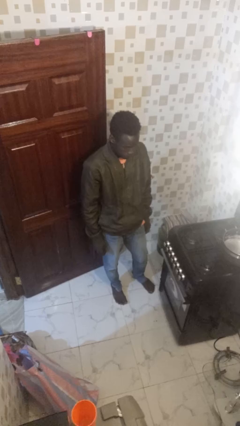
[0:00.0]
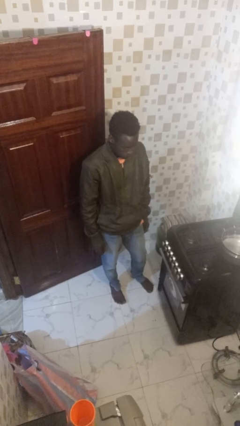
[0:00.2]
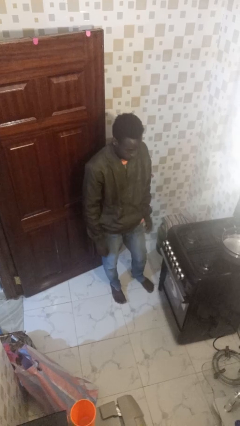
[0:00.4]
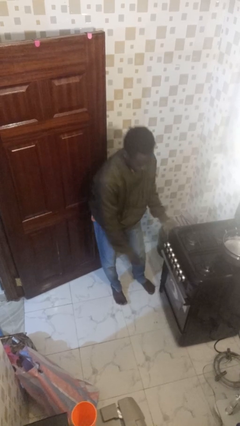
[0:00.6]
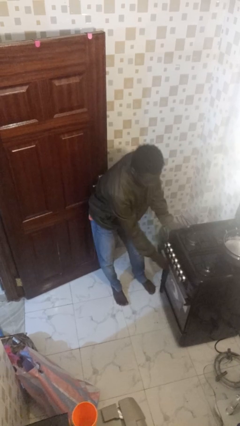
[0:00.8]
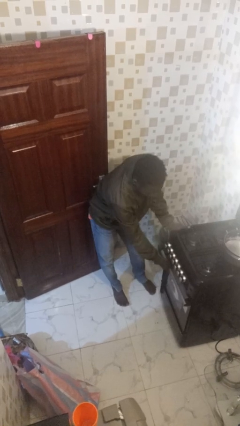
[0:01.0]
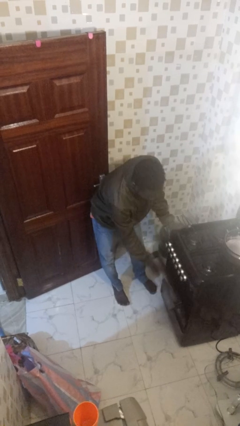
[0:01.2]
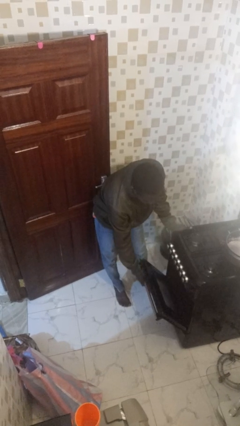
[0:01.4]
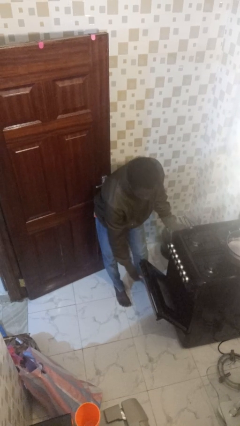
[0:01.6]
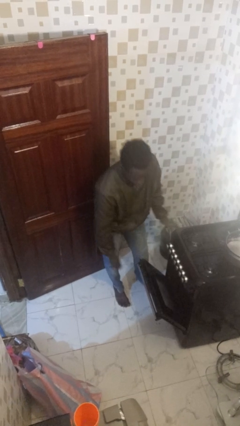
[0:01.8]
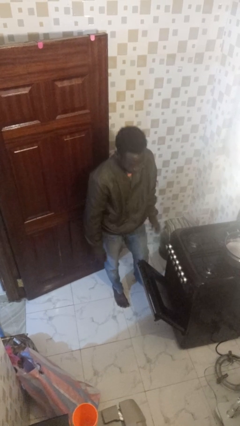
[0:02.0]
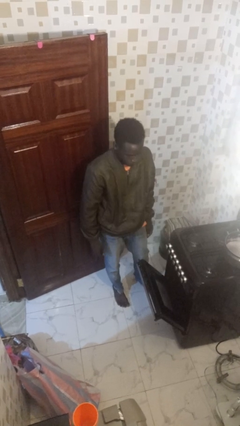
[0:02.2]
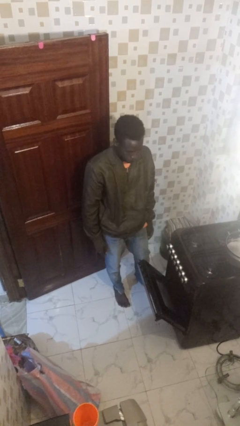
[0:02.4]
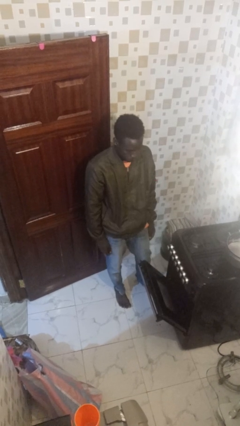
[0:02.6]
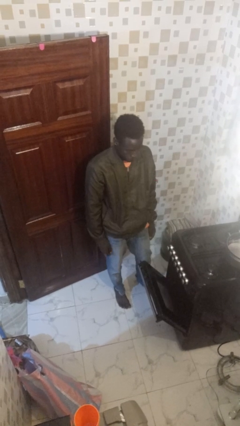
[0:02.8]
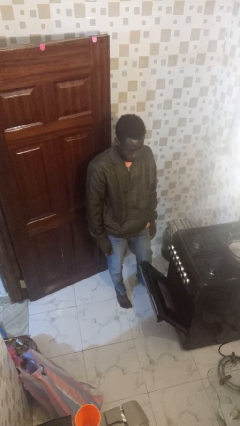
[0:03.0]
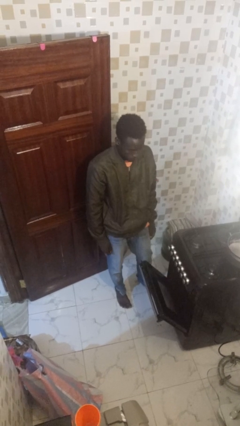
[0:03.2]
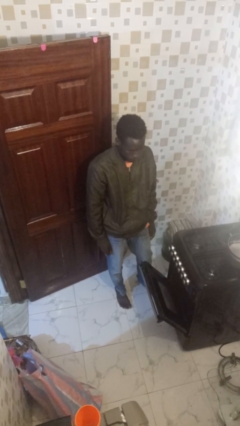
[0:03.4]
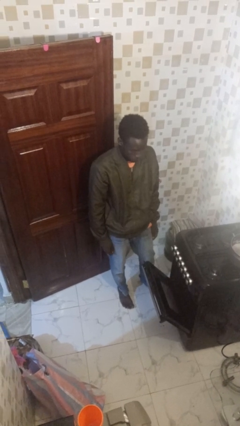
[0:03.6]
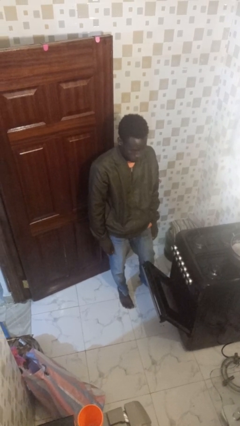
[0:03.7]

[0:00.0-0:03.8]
person opens oven door

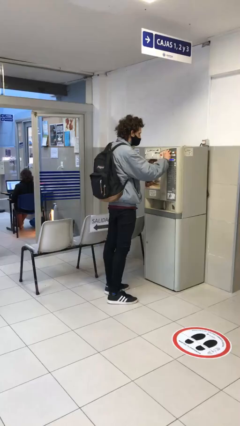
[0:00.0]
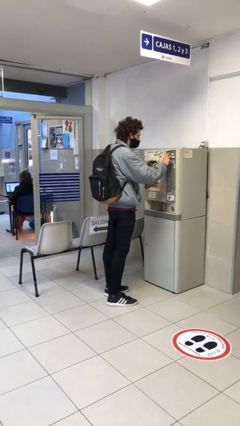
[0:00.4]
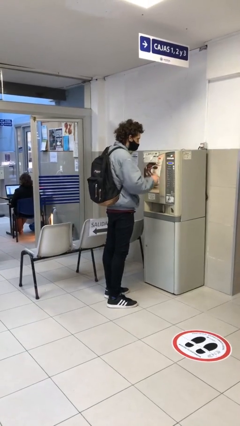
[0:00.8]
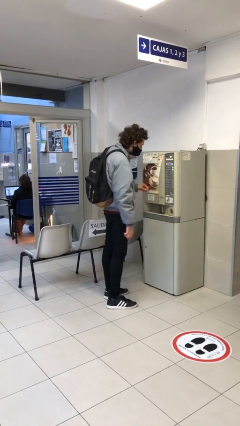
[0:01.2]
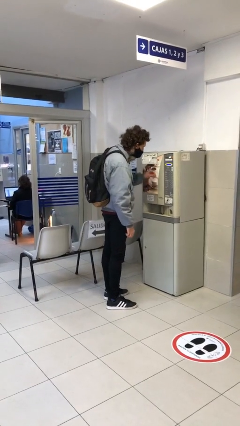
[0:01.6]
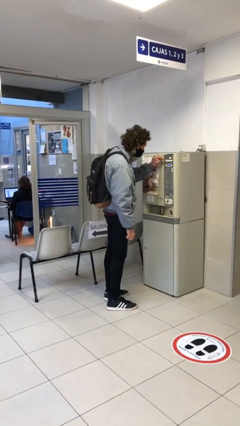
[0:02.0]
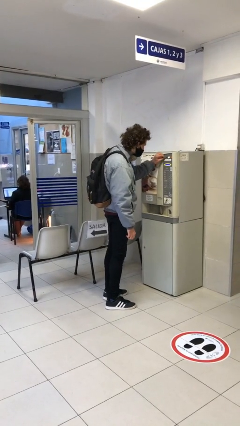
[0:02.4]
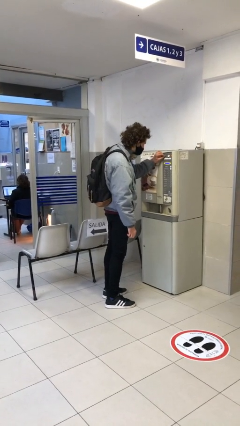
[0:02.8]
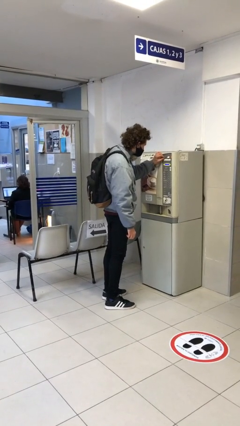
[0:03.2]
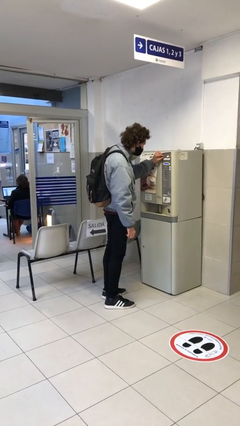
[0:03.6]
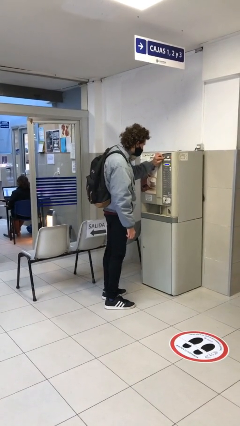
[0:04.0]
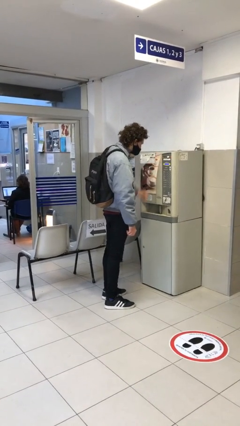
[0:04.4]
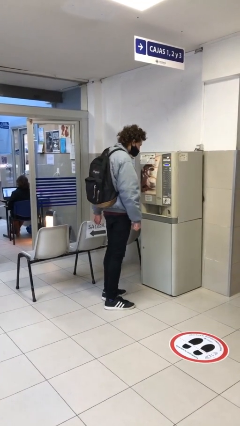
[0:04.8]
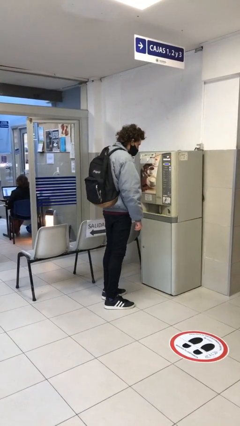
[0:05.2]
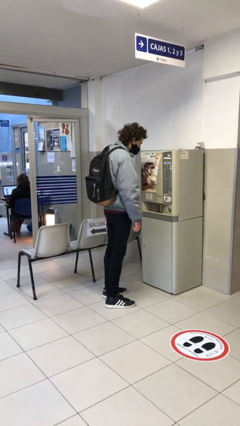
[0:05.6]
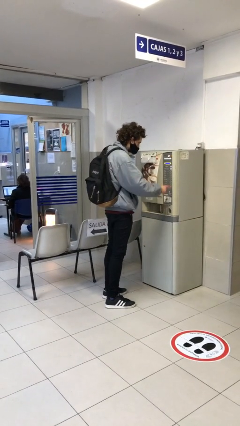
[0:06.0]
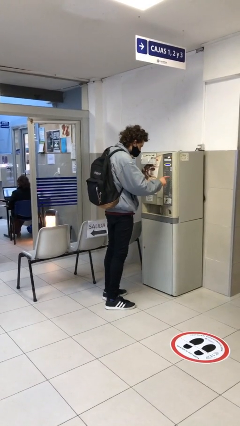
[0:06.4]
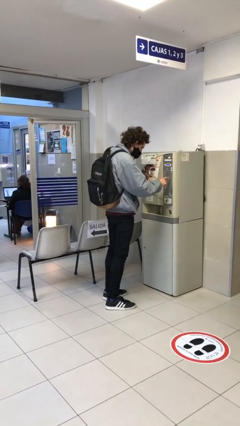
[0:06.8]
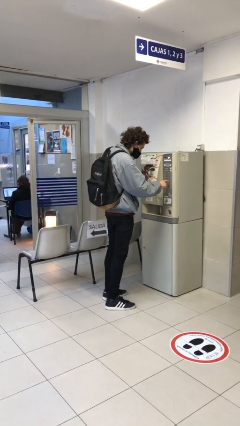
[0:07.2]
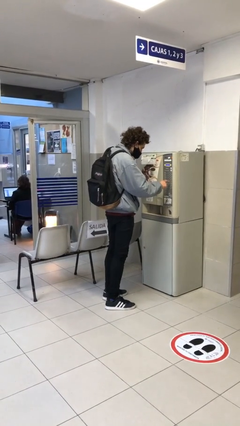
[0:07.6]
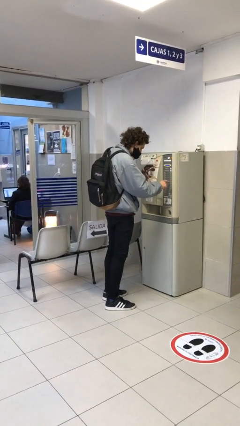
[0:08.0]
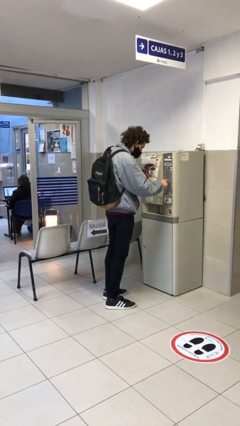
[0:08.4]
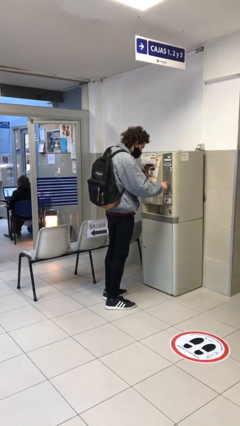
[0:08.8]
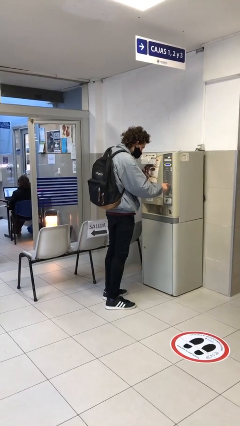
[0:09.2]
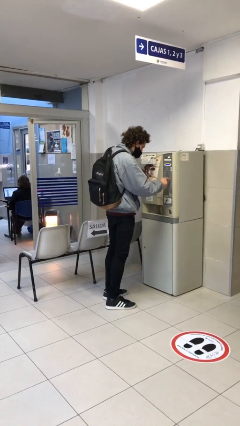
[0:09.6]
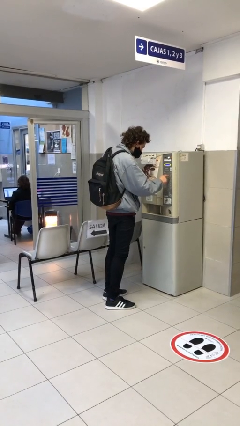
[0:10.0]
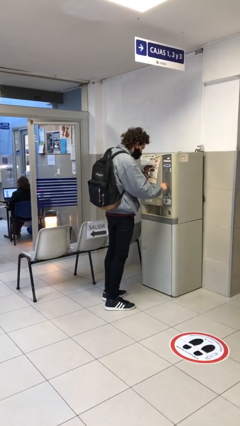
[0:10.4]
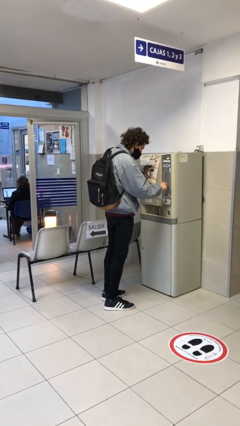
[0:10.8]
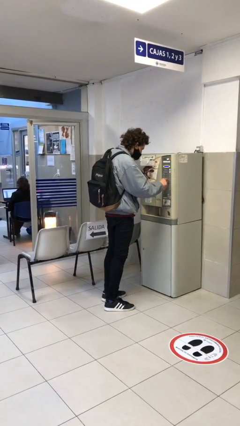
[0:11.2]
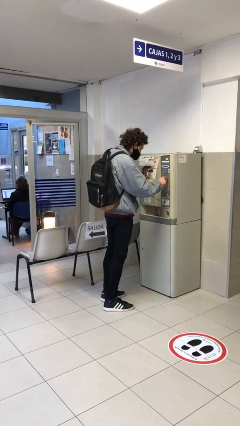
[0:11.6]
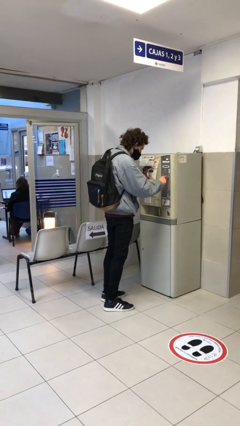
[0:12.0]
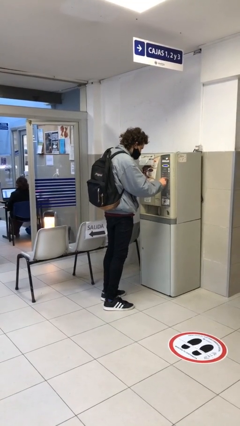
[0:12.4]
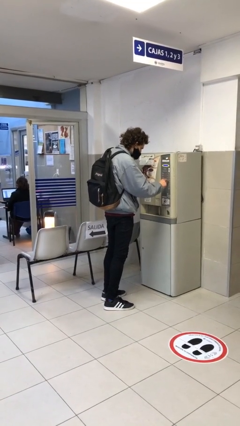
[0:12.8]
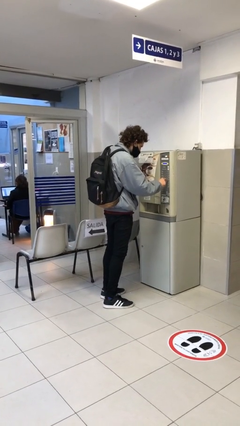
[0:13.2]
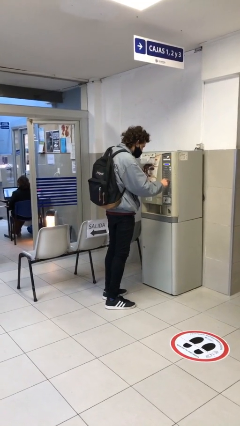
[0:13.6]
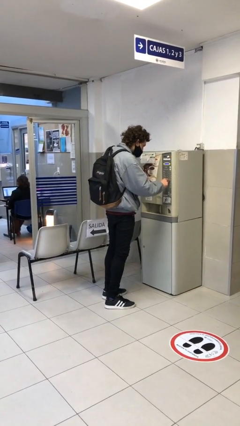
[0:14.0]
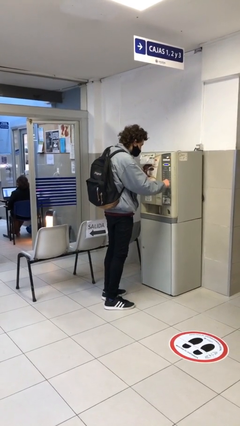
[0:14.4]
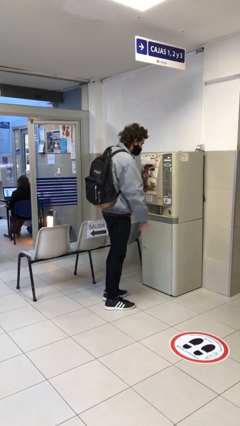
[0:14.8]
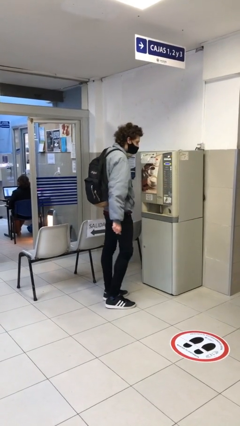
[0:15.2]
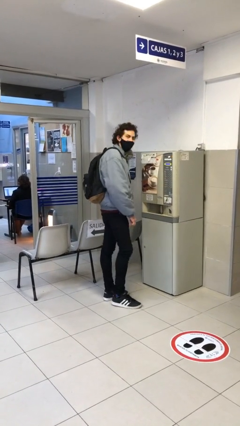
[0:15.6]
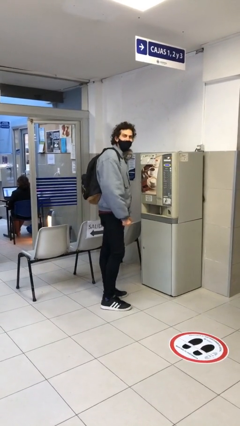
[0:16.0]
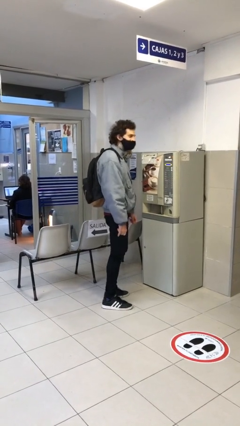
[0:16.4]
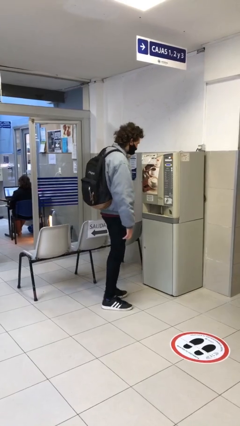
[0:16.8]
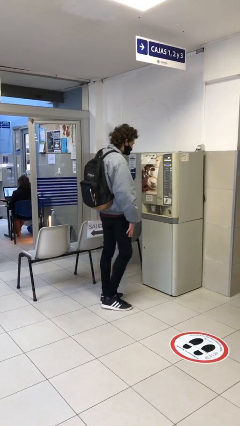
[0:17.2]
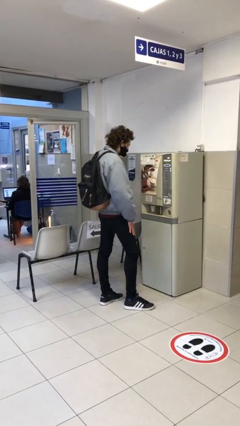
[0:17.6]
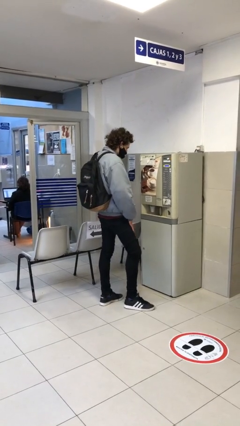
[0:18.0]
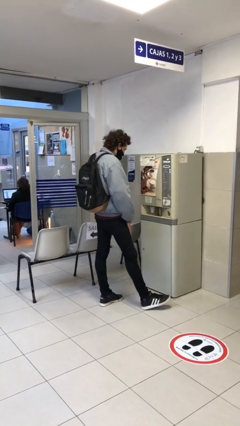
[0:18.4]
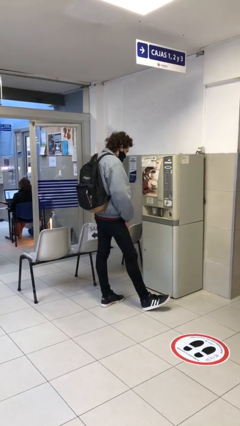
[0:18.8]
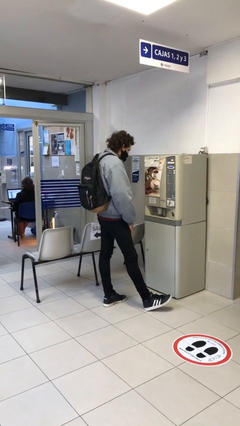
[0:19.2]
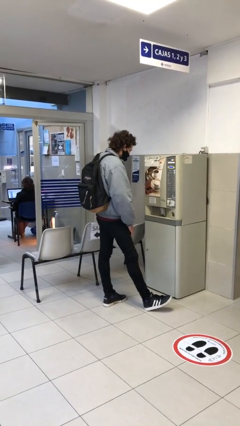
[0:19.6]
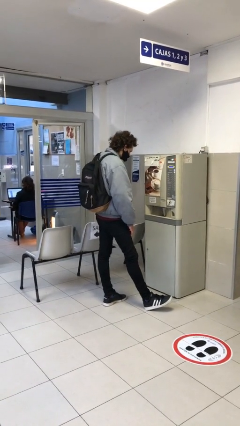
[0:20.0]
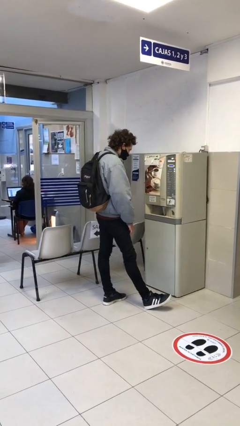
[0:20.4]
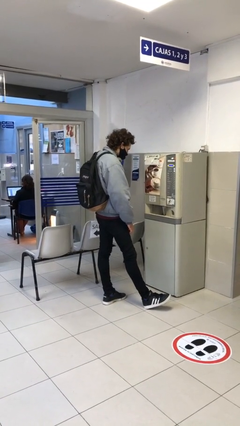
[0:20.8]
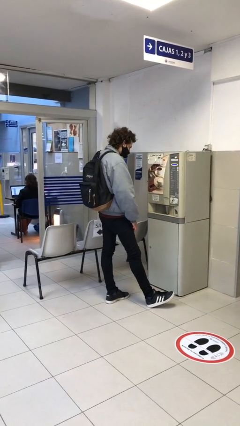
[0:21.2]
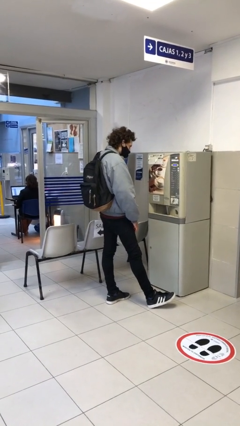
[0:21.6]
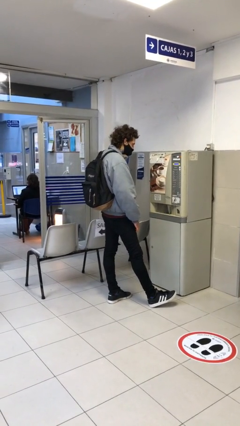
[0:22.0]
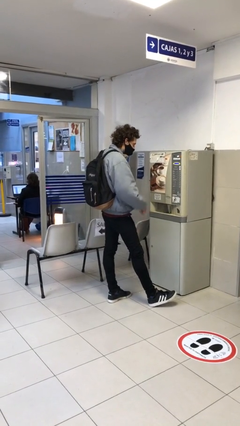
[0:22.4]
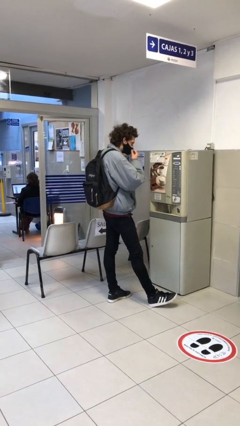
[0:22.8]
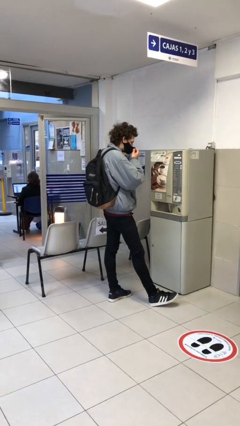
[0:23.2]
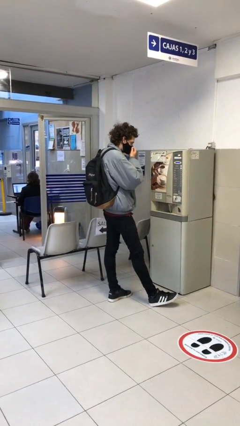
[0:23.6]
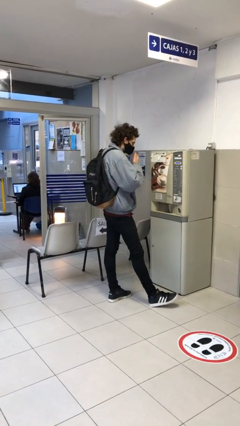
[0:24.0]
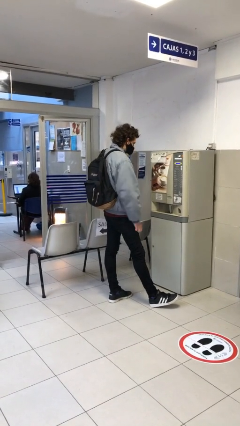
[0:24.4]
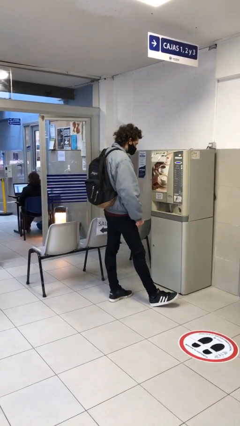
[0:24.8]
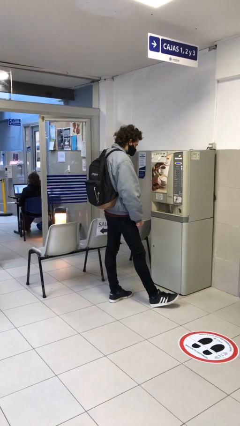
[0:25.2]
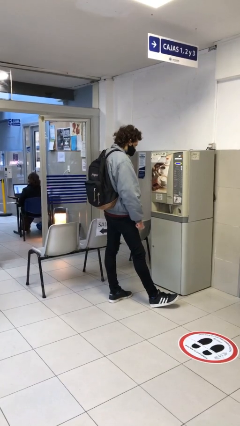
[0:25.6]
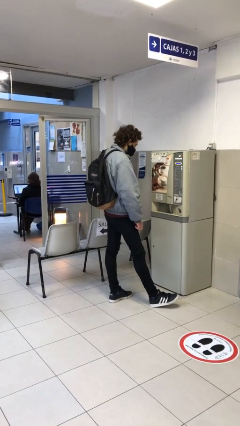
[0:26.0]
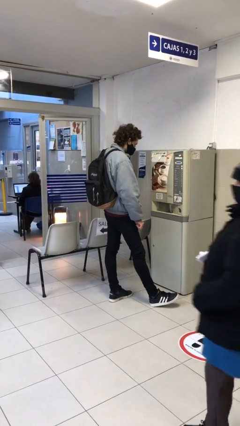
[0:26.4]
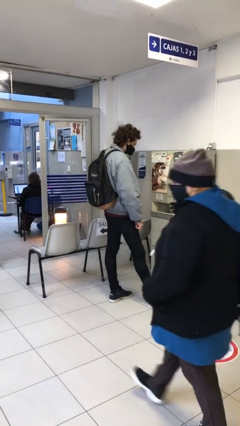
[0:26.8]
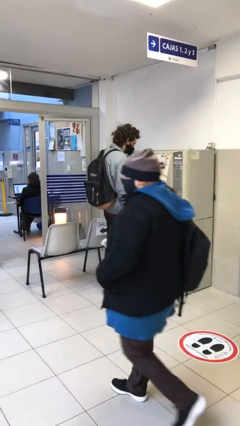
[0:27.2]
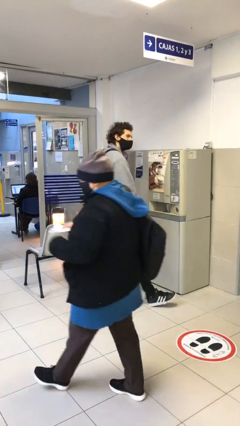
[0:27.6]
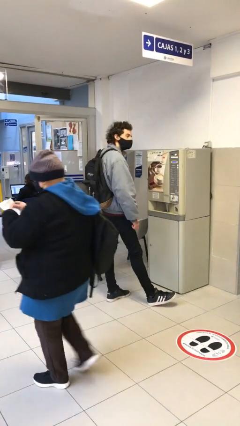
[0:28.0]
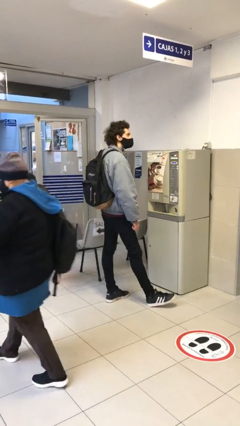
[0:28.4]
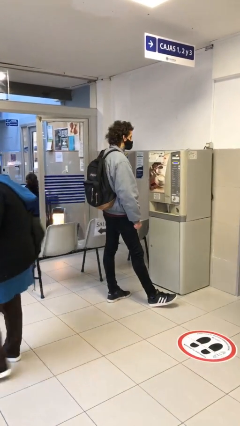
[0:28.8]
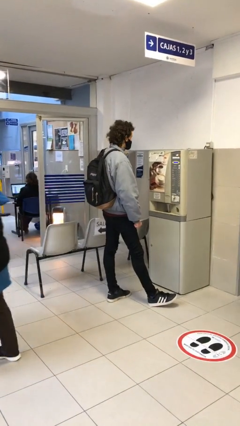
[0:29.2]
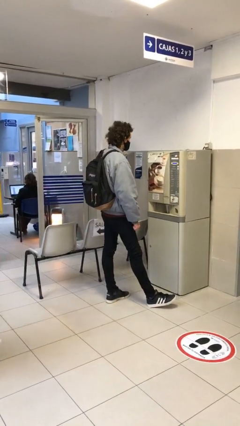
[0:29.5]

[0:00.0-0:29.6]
person purchases from machine
